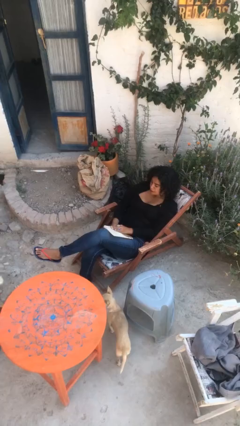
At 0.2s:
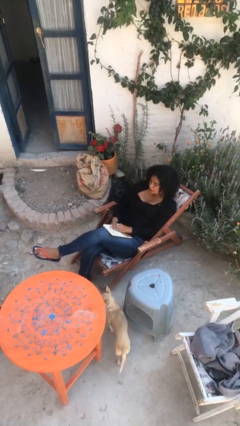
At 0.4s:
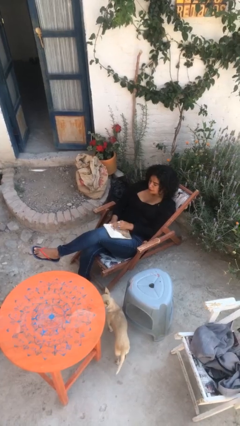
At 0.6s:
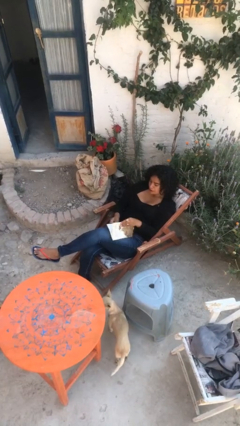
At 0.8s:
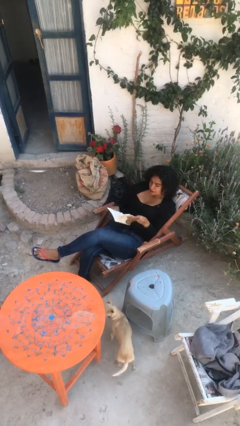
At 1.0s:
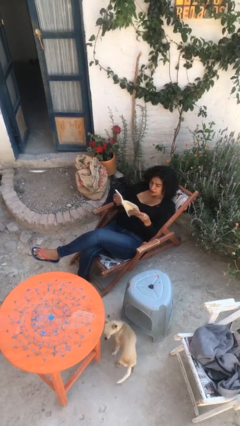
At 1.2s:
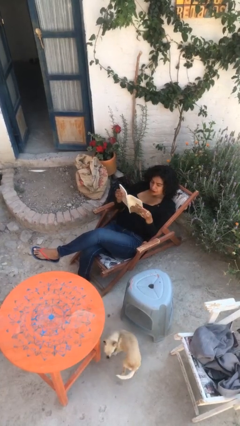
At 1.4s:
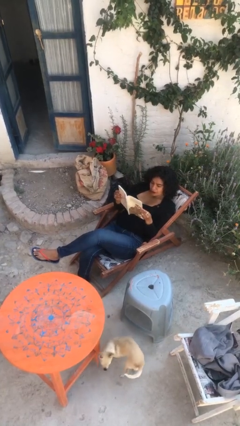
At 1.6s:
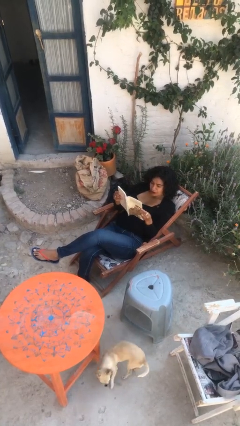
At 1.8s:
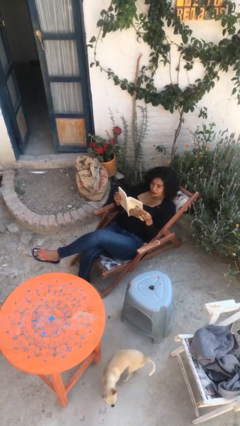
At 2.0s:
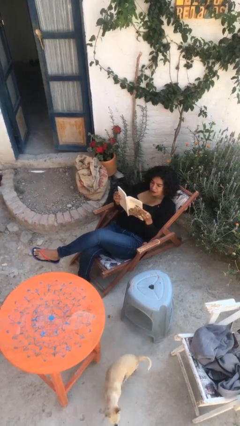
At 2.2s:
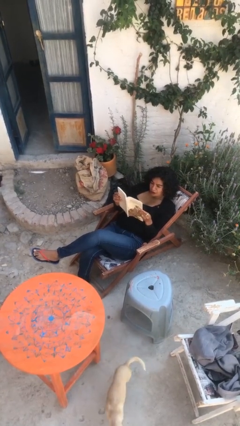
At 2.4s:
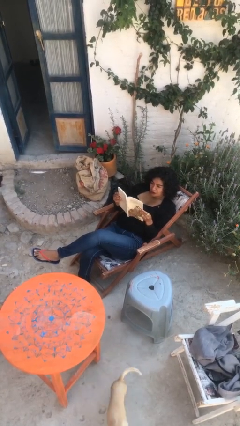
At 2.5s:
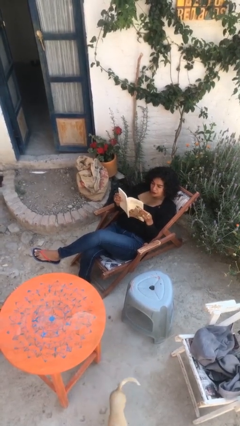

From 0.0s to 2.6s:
person reads document

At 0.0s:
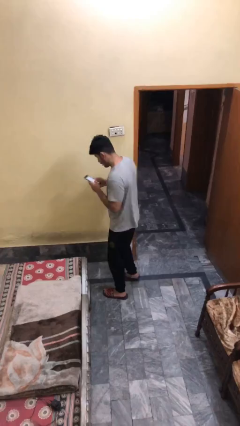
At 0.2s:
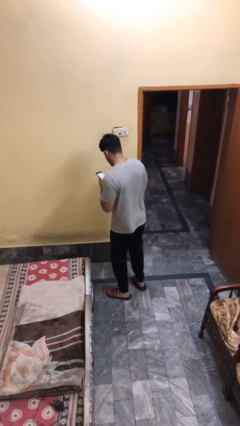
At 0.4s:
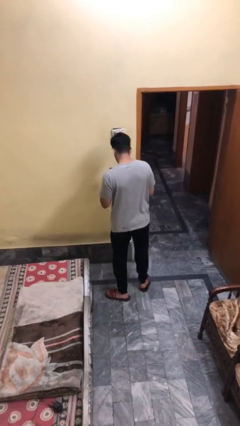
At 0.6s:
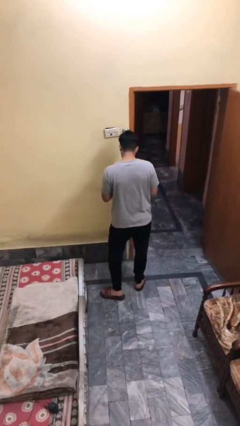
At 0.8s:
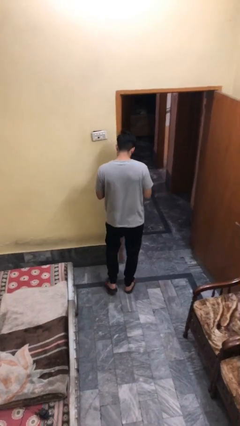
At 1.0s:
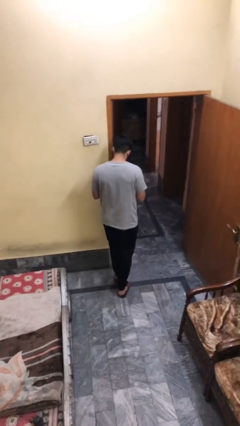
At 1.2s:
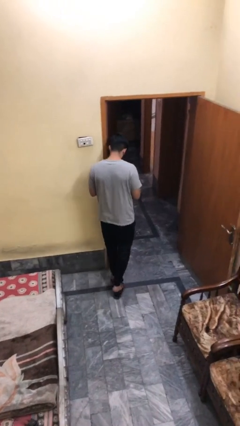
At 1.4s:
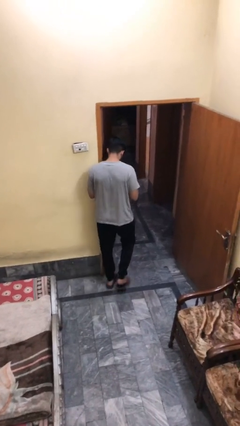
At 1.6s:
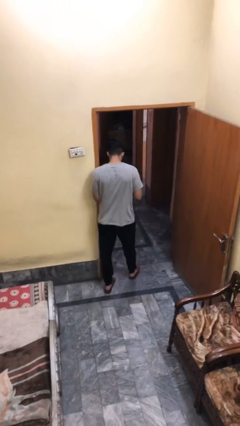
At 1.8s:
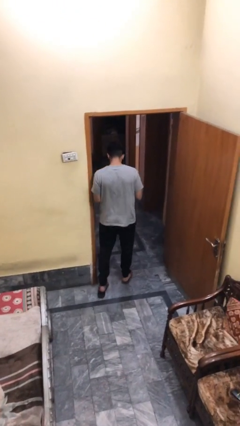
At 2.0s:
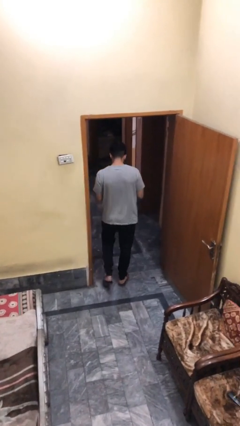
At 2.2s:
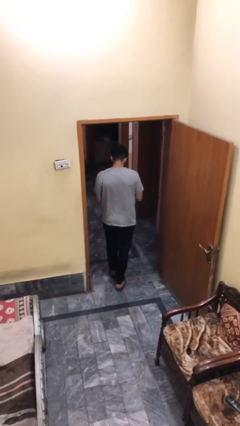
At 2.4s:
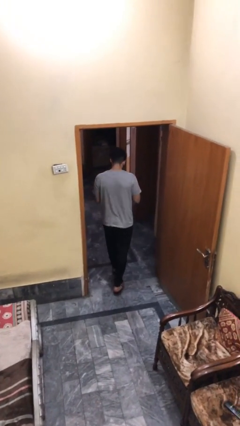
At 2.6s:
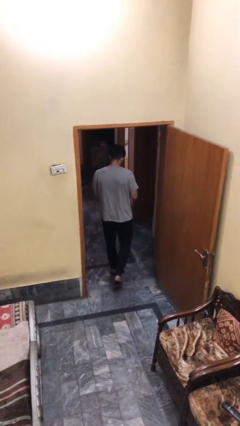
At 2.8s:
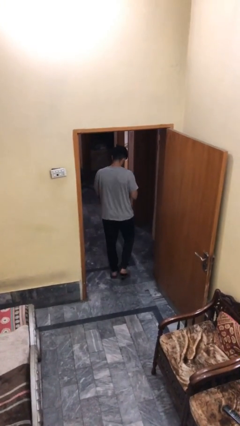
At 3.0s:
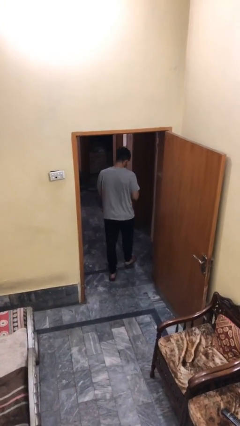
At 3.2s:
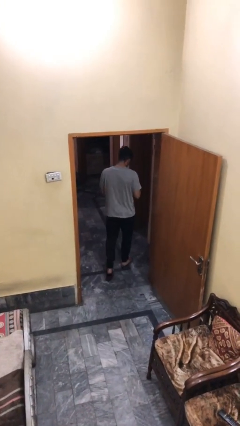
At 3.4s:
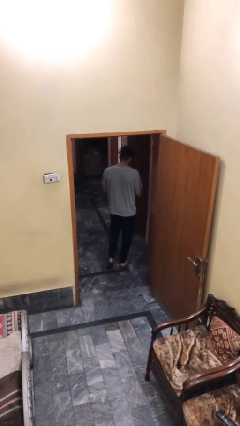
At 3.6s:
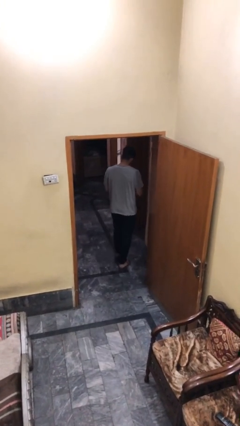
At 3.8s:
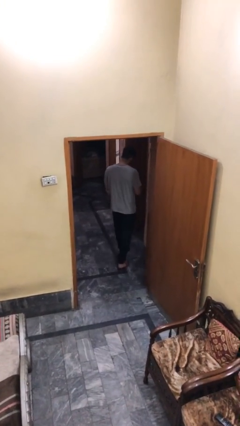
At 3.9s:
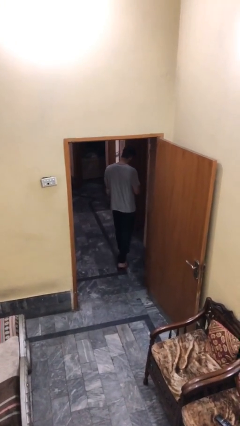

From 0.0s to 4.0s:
person exits scene through structure

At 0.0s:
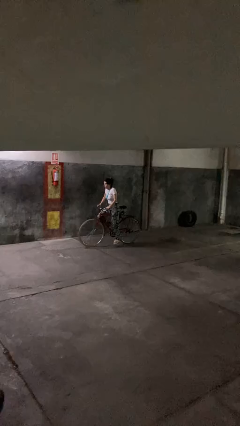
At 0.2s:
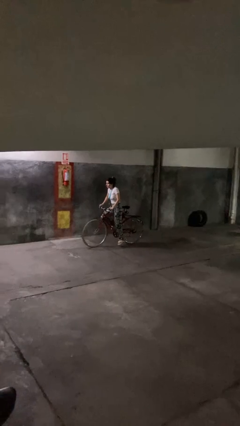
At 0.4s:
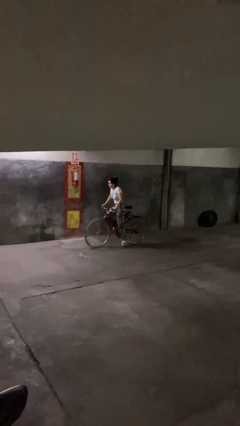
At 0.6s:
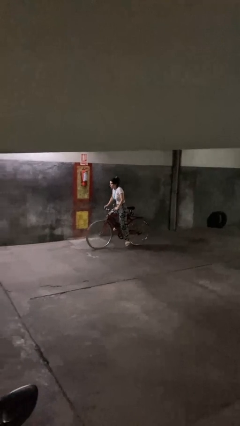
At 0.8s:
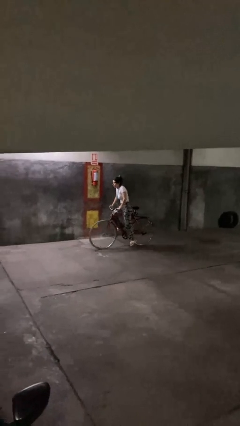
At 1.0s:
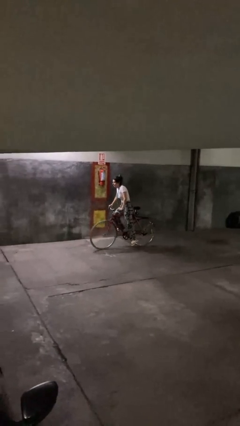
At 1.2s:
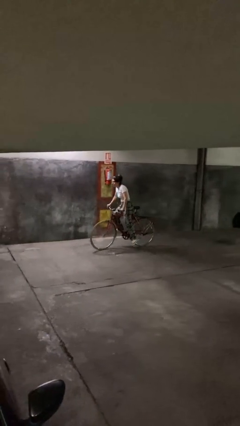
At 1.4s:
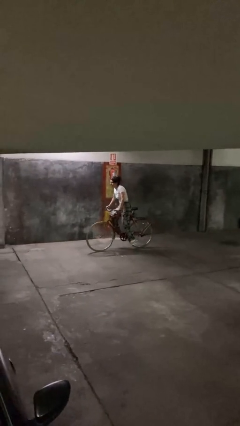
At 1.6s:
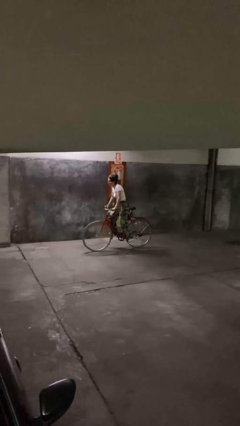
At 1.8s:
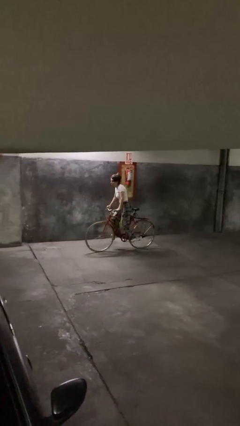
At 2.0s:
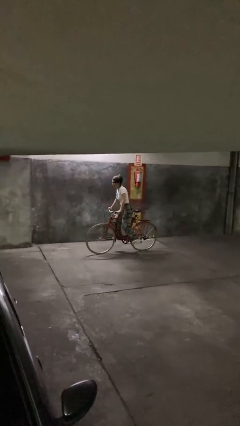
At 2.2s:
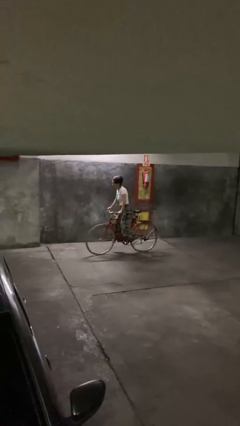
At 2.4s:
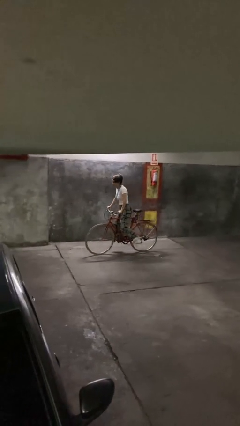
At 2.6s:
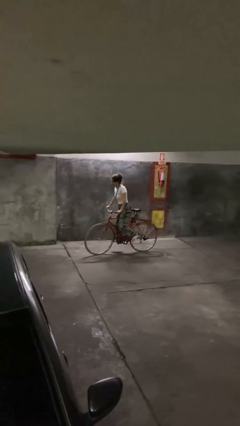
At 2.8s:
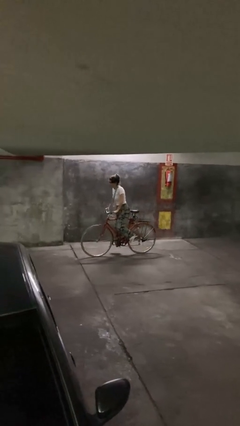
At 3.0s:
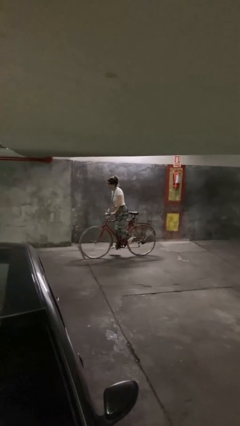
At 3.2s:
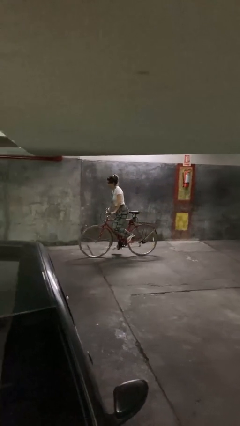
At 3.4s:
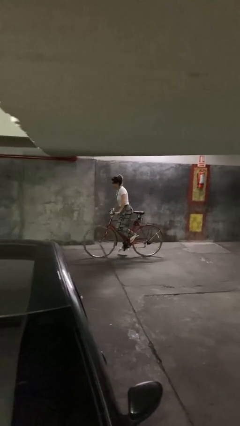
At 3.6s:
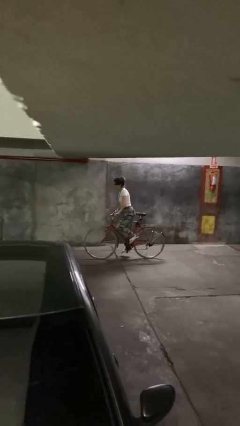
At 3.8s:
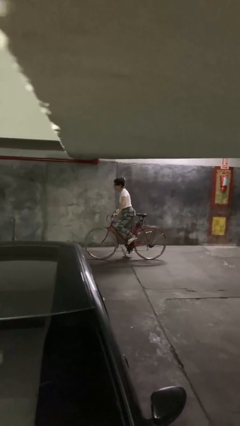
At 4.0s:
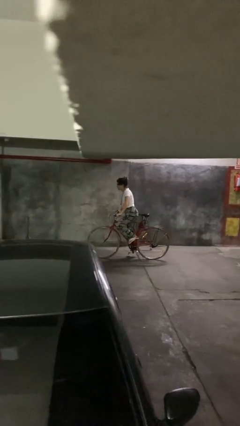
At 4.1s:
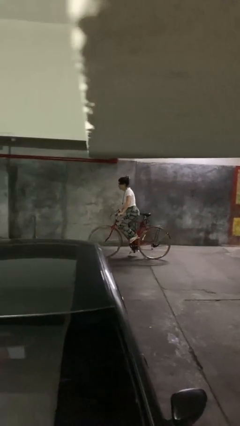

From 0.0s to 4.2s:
person rides bicycle

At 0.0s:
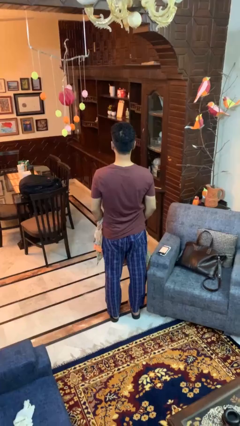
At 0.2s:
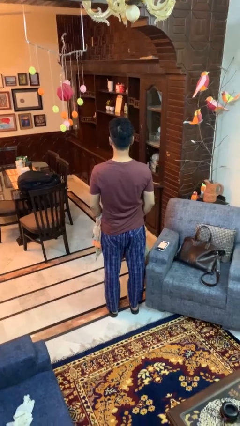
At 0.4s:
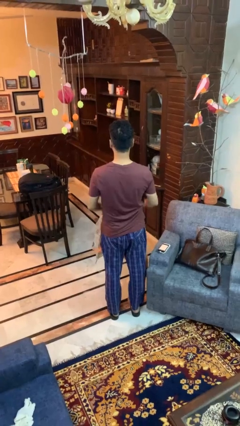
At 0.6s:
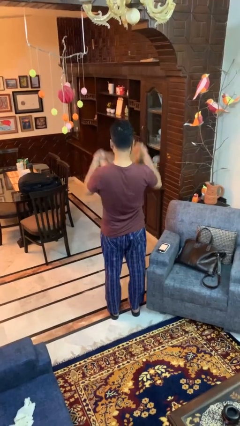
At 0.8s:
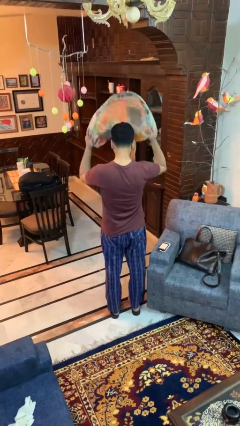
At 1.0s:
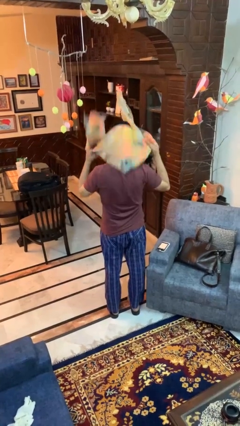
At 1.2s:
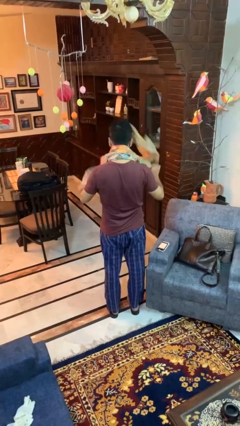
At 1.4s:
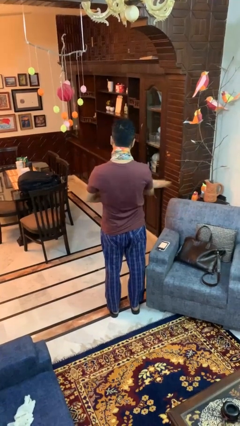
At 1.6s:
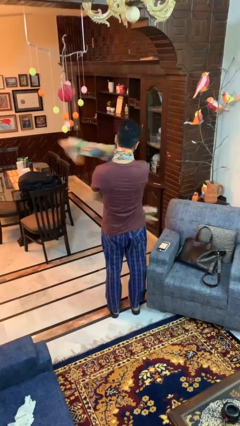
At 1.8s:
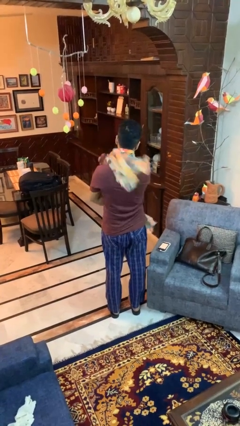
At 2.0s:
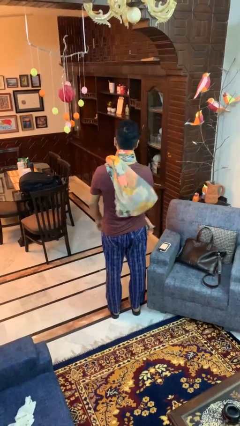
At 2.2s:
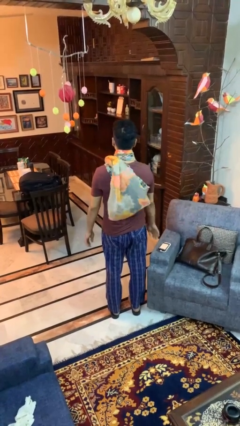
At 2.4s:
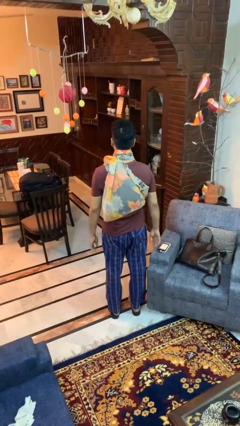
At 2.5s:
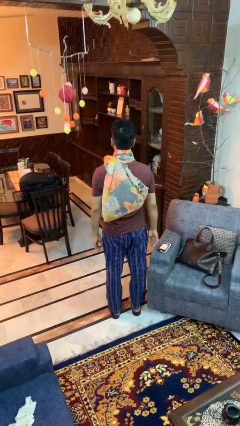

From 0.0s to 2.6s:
person puts on scarf

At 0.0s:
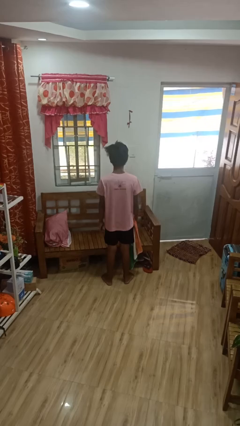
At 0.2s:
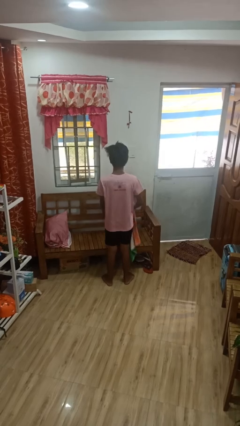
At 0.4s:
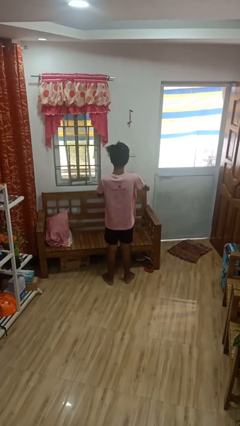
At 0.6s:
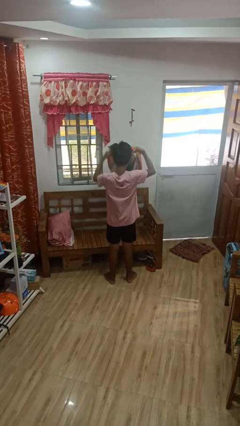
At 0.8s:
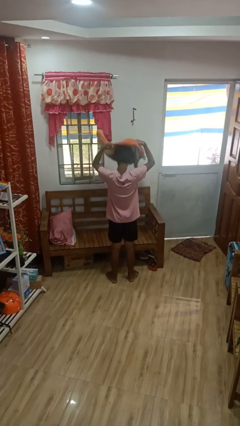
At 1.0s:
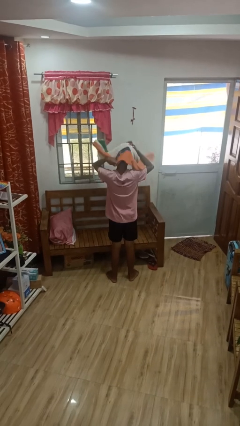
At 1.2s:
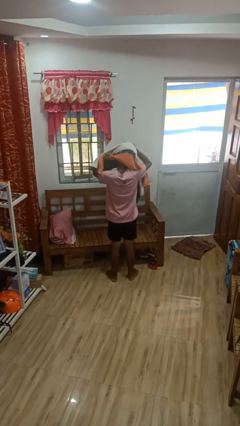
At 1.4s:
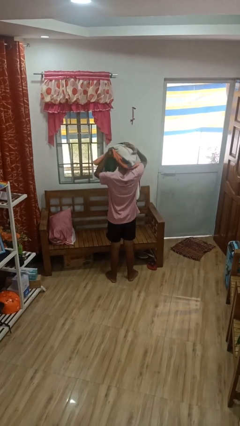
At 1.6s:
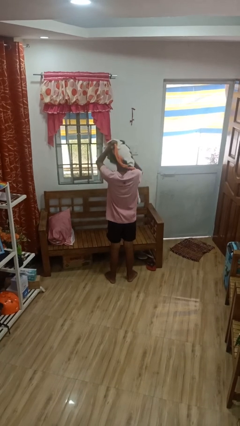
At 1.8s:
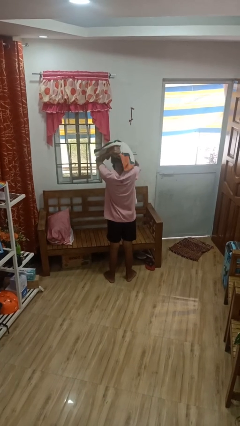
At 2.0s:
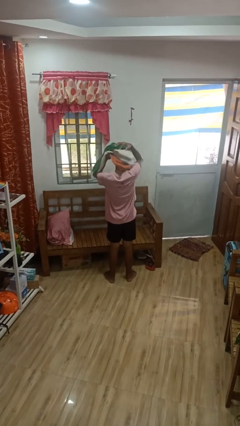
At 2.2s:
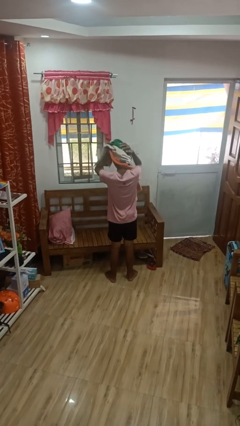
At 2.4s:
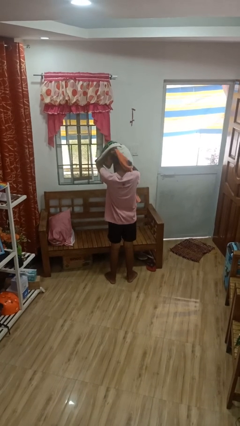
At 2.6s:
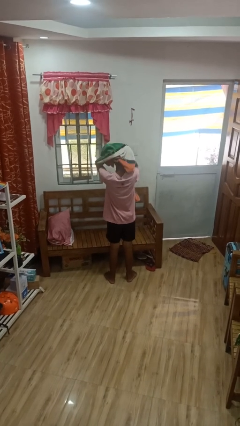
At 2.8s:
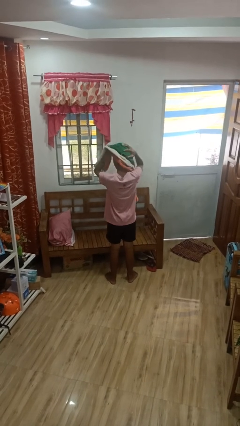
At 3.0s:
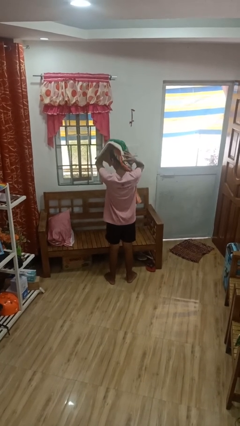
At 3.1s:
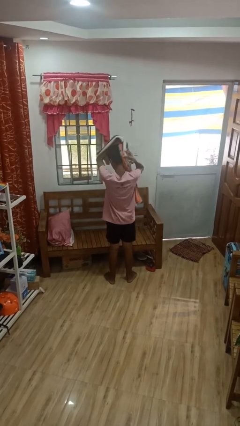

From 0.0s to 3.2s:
person dries hair with towel

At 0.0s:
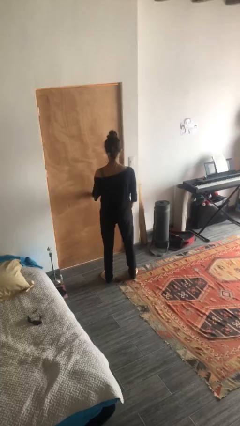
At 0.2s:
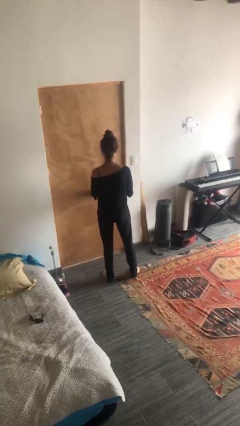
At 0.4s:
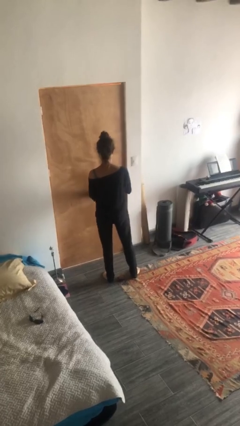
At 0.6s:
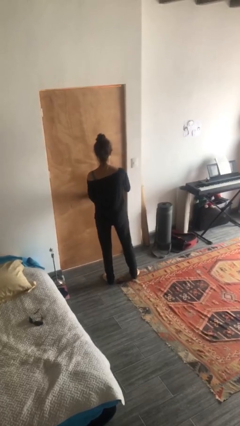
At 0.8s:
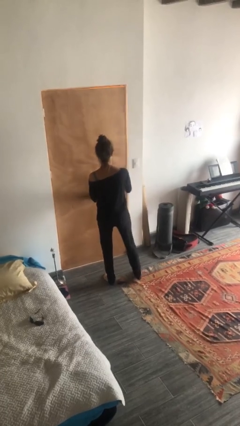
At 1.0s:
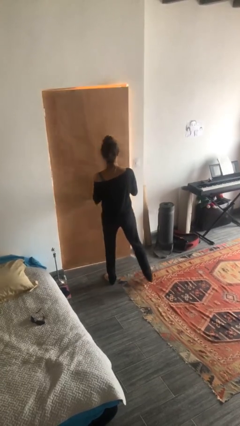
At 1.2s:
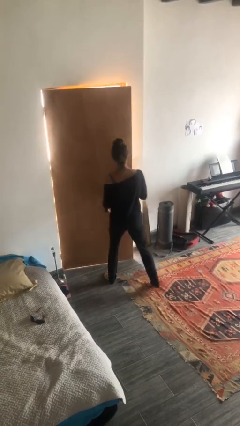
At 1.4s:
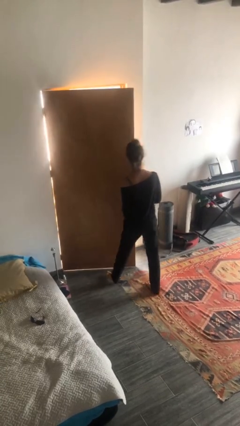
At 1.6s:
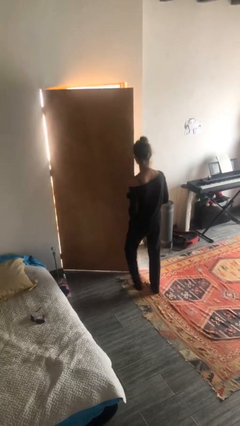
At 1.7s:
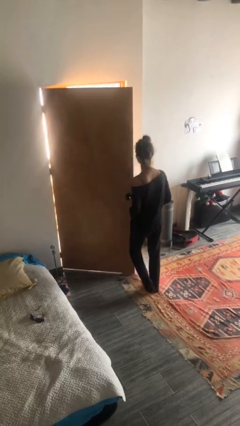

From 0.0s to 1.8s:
person opens facility door
